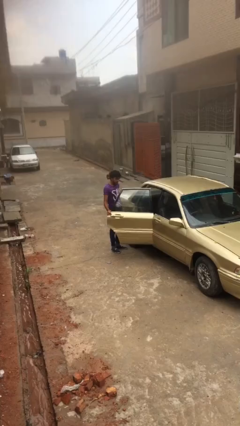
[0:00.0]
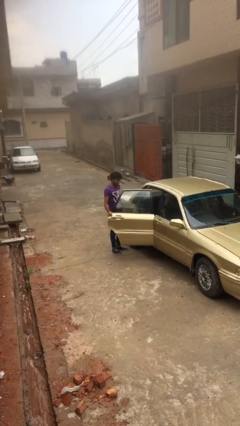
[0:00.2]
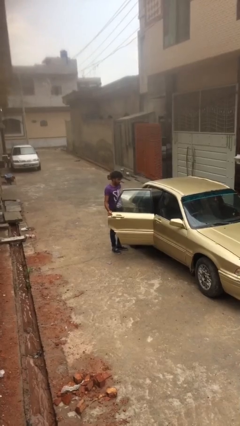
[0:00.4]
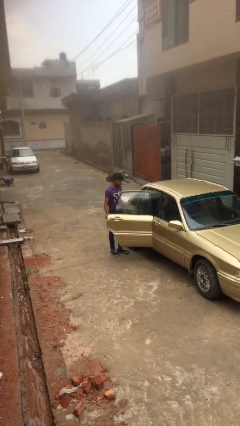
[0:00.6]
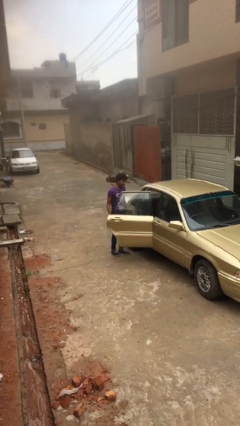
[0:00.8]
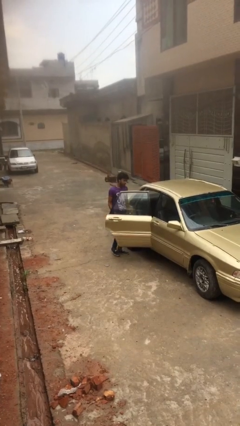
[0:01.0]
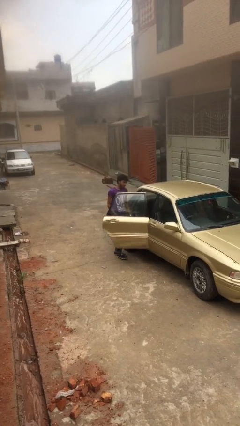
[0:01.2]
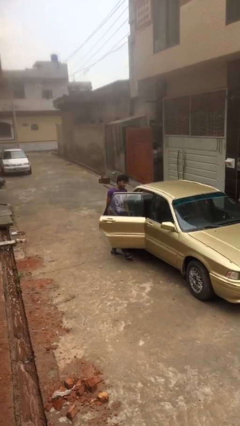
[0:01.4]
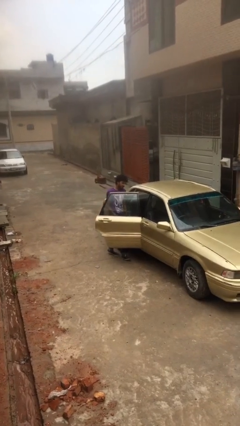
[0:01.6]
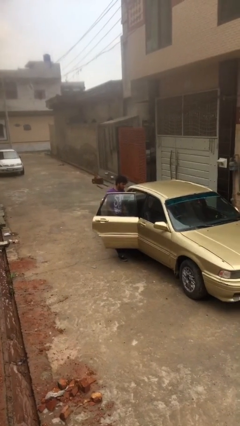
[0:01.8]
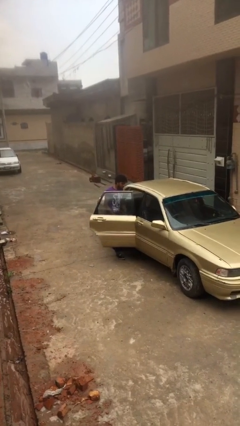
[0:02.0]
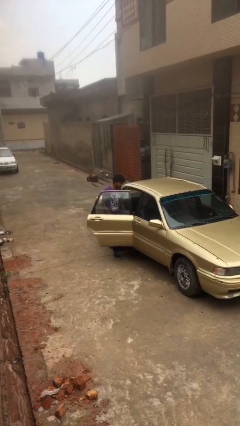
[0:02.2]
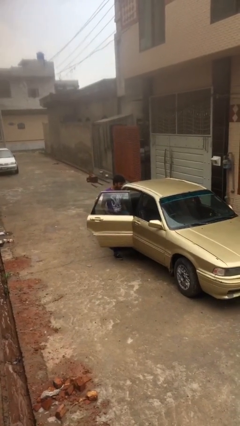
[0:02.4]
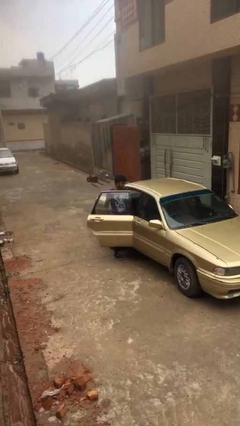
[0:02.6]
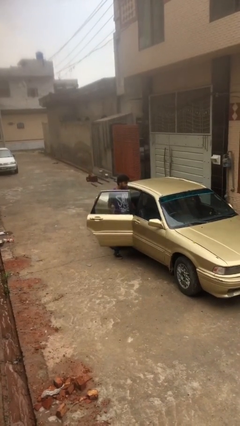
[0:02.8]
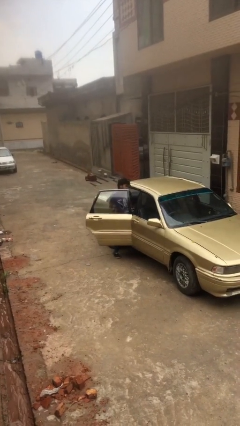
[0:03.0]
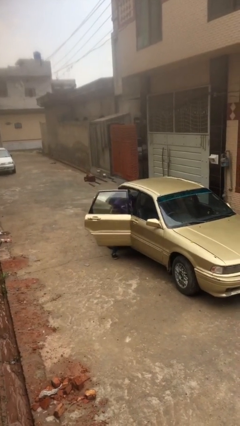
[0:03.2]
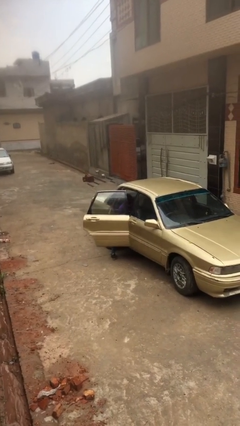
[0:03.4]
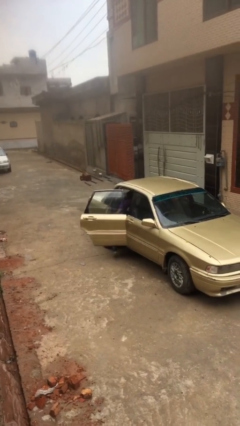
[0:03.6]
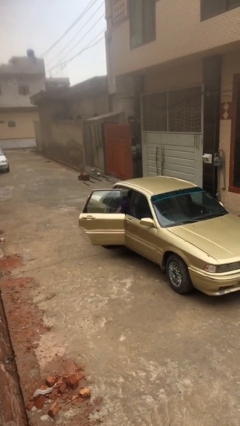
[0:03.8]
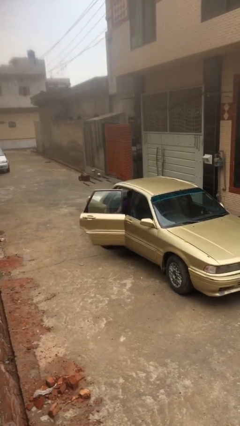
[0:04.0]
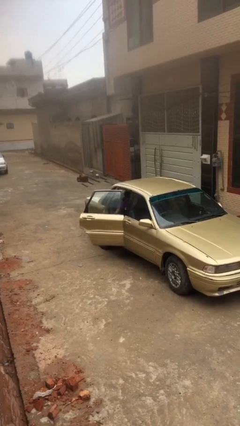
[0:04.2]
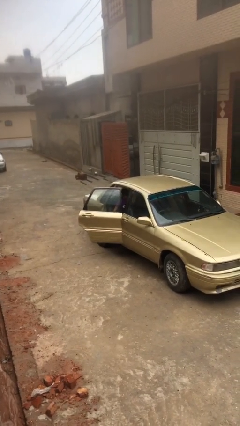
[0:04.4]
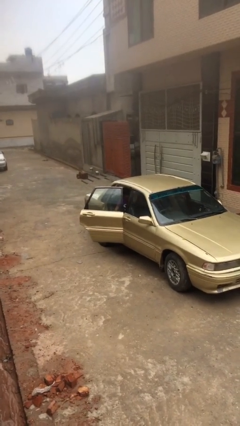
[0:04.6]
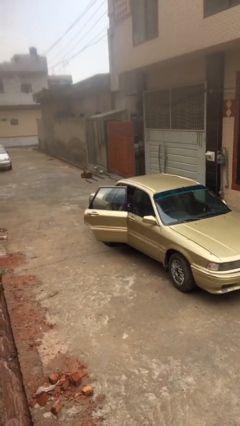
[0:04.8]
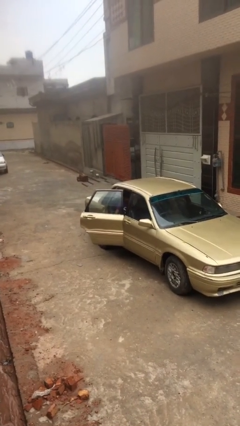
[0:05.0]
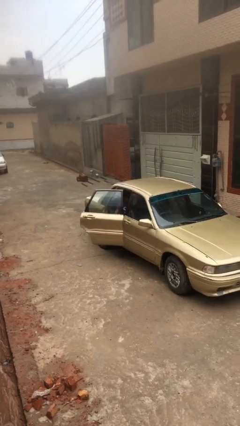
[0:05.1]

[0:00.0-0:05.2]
person enters car

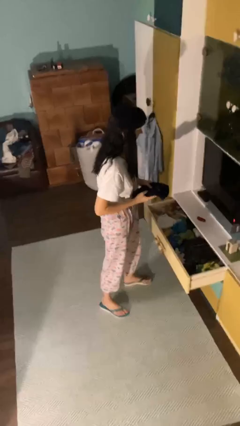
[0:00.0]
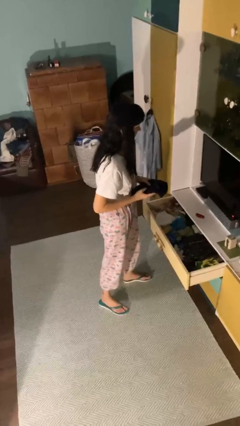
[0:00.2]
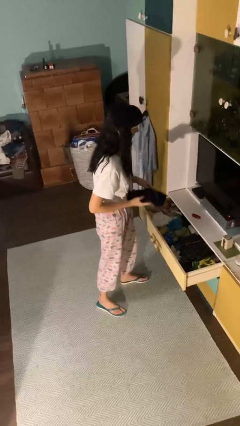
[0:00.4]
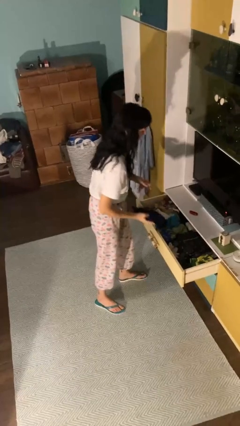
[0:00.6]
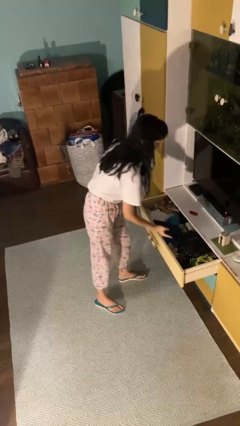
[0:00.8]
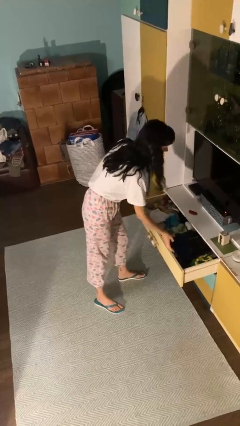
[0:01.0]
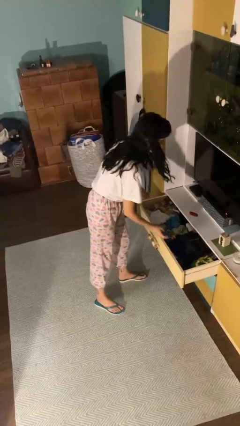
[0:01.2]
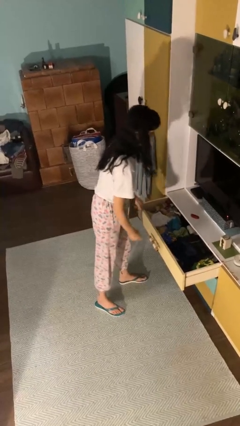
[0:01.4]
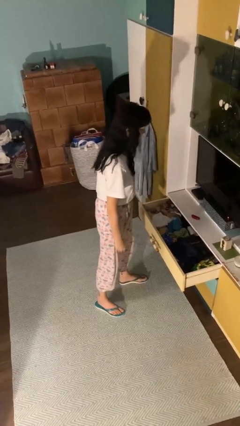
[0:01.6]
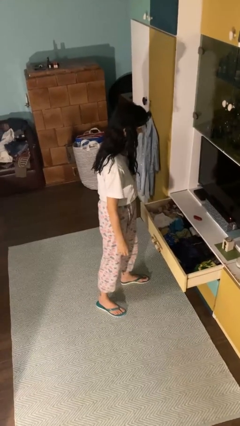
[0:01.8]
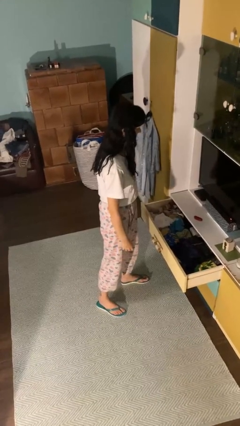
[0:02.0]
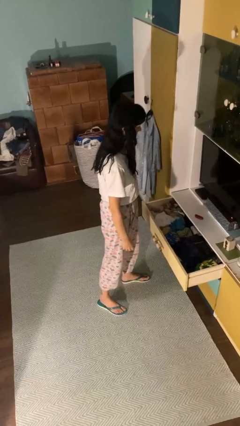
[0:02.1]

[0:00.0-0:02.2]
person puts clothes into dresser

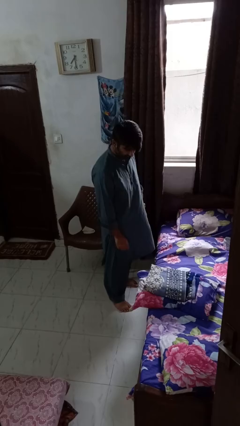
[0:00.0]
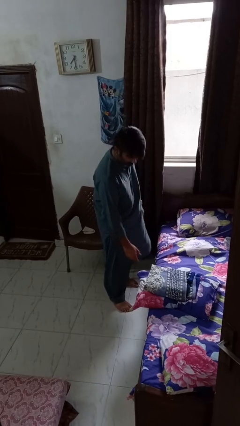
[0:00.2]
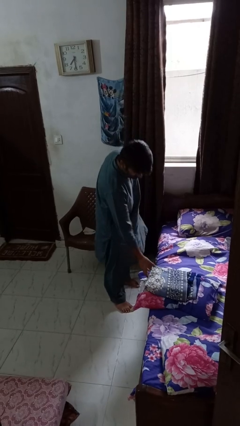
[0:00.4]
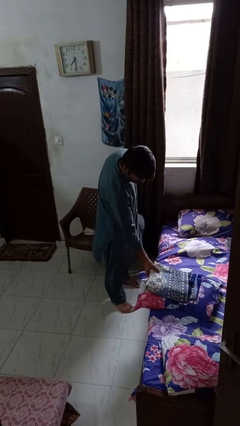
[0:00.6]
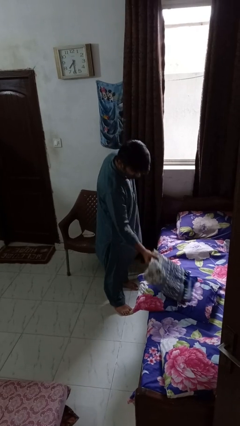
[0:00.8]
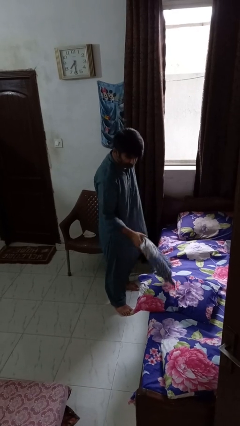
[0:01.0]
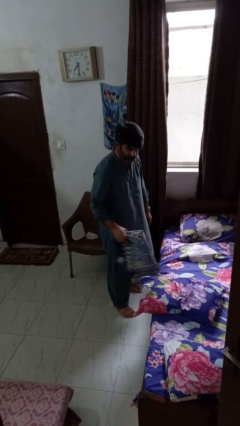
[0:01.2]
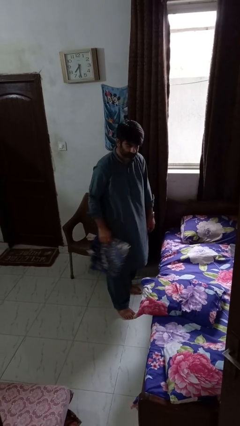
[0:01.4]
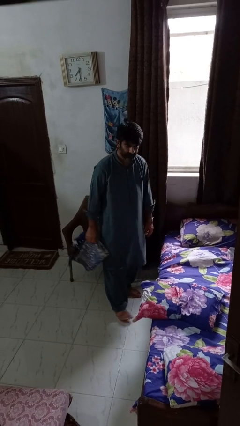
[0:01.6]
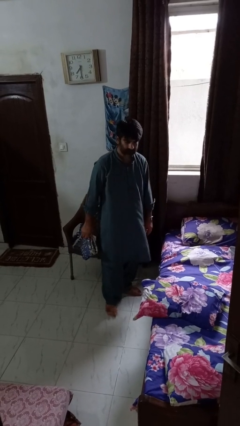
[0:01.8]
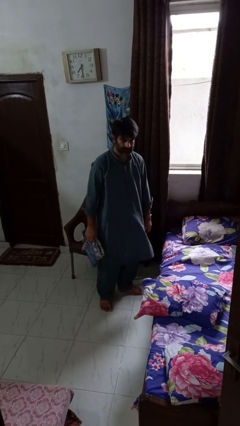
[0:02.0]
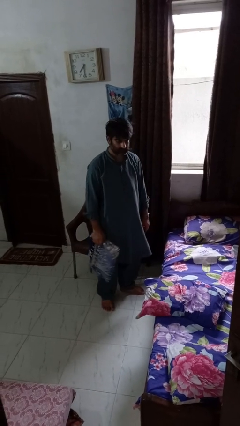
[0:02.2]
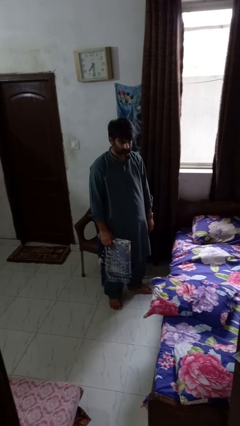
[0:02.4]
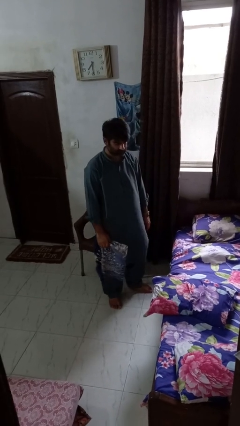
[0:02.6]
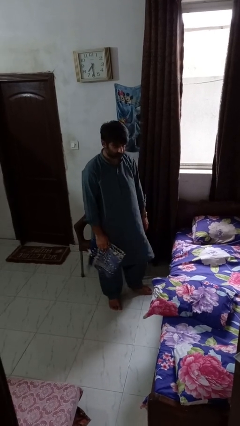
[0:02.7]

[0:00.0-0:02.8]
person picks up object from bed

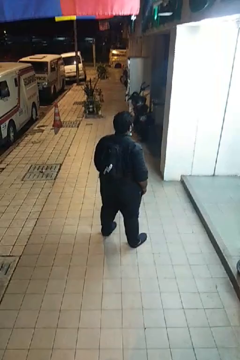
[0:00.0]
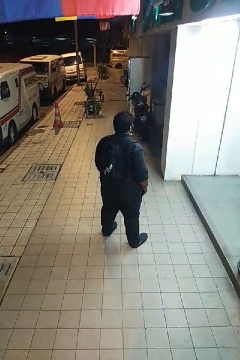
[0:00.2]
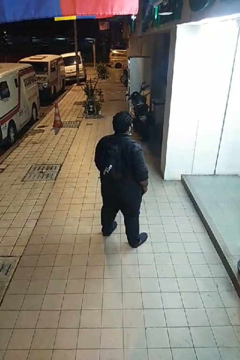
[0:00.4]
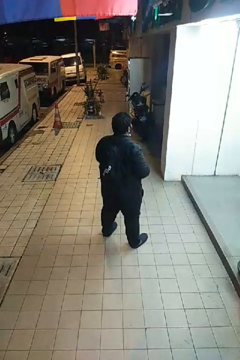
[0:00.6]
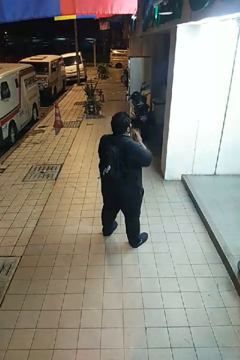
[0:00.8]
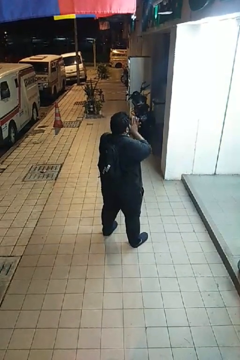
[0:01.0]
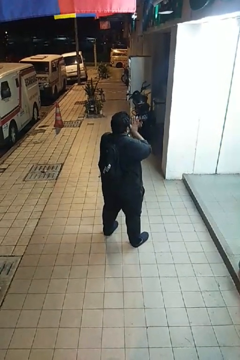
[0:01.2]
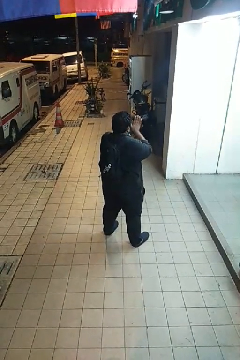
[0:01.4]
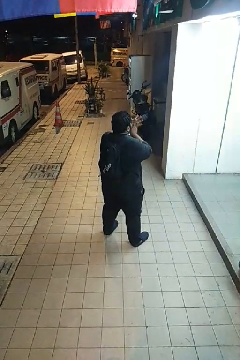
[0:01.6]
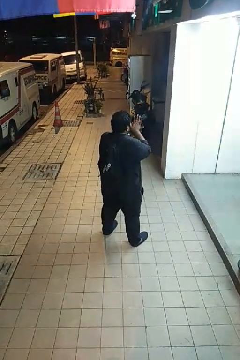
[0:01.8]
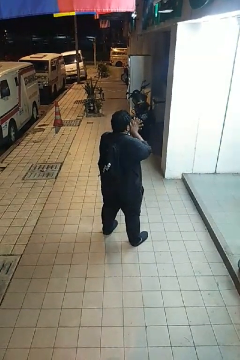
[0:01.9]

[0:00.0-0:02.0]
person blows into hands

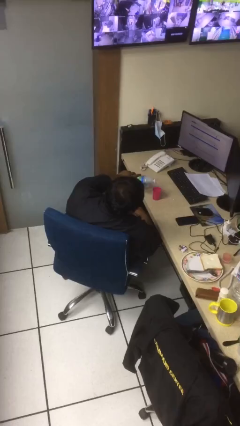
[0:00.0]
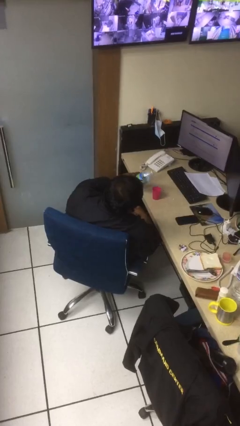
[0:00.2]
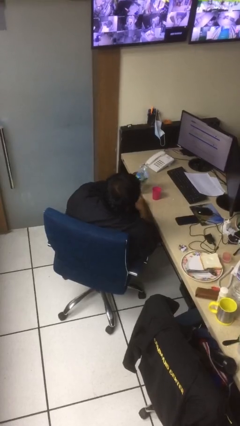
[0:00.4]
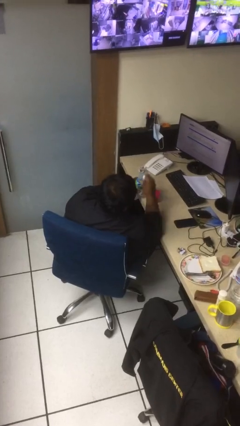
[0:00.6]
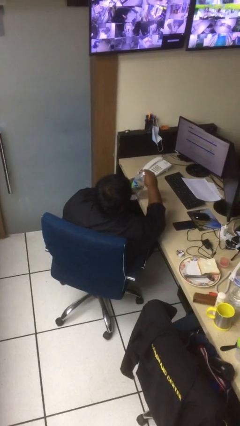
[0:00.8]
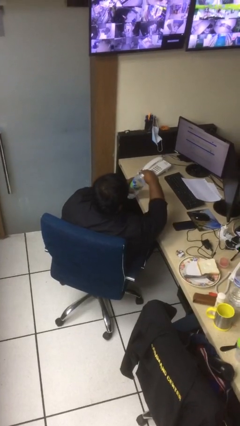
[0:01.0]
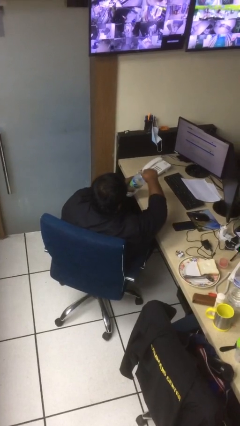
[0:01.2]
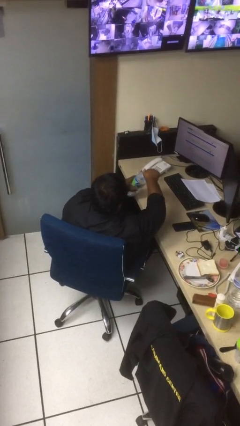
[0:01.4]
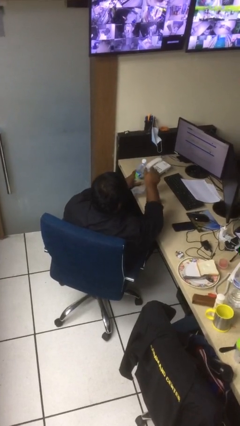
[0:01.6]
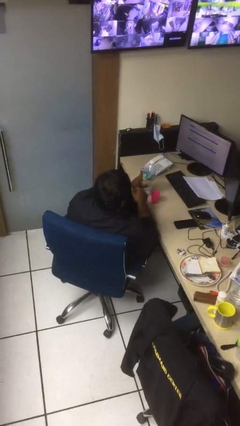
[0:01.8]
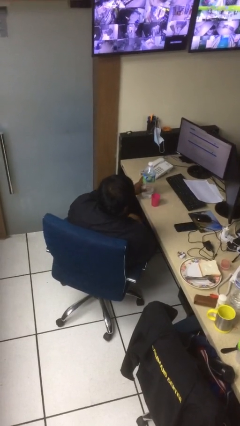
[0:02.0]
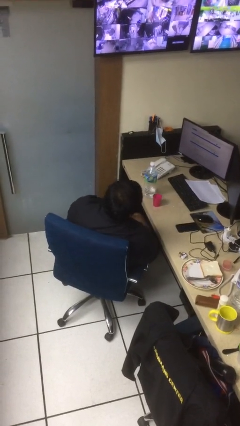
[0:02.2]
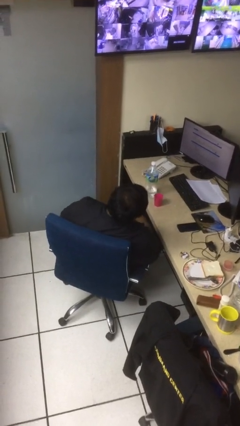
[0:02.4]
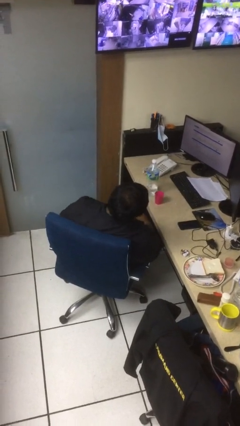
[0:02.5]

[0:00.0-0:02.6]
person screws lid to bottle

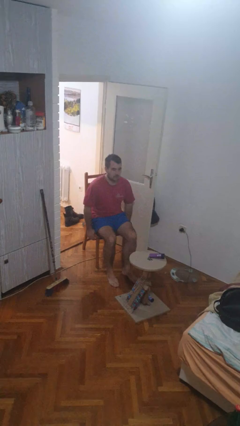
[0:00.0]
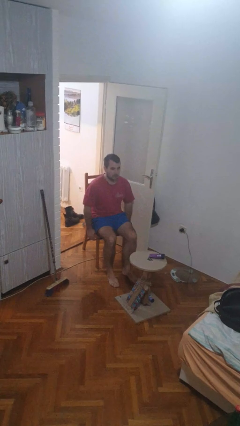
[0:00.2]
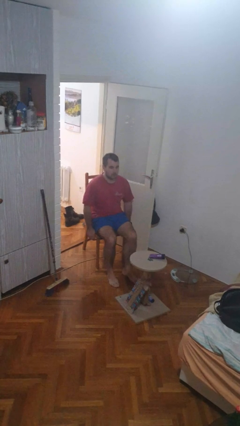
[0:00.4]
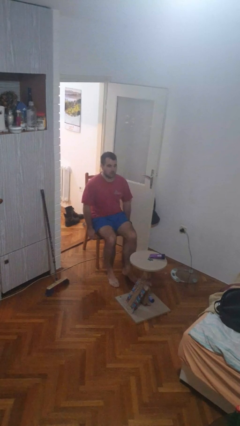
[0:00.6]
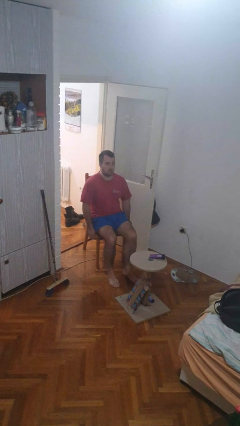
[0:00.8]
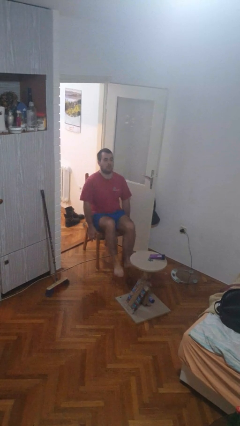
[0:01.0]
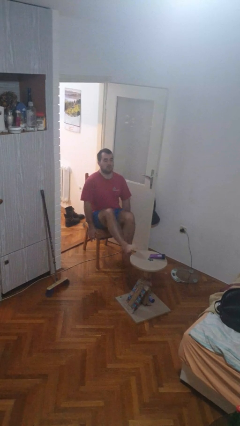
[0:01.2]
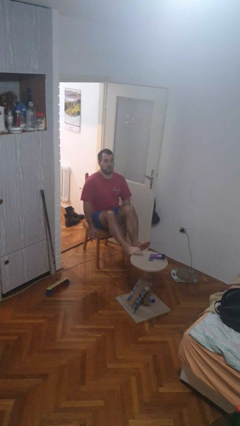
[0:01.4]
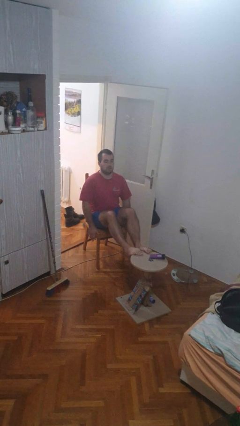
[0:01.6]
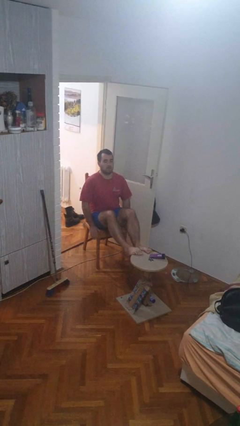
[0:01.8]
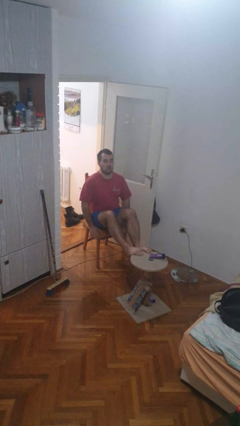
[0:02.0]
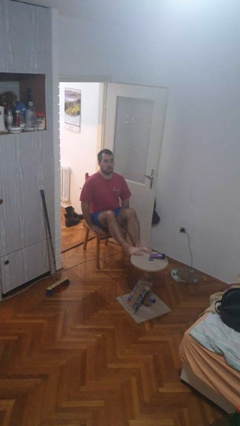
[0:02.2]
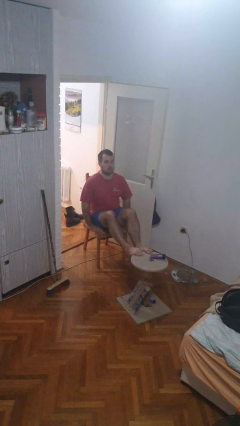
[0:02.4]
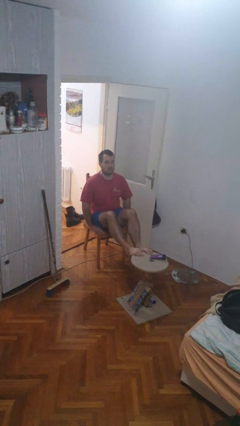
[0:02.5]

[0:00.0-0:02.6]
person puts feet up
